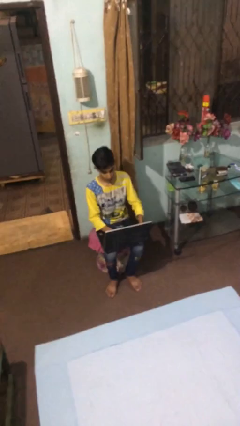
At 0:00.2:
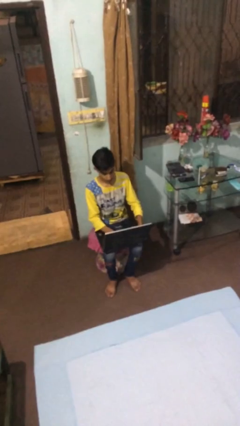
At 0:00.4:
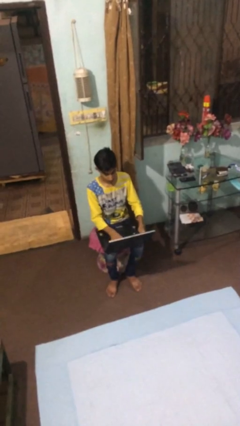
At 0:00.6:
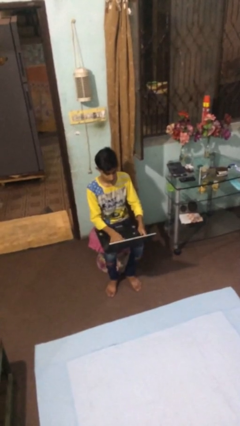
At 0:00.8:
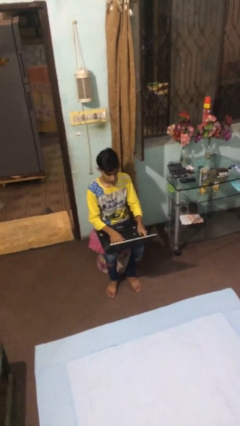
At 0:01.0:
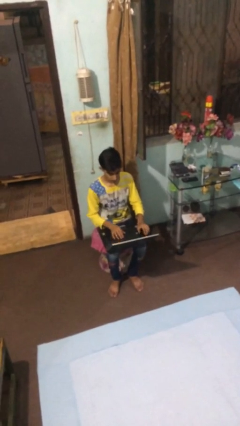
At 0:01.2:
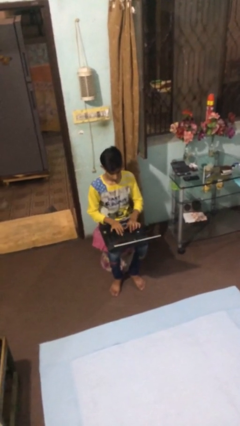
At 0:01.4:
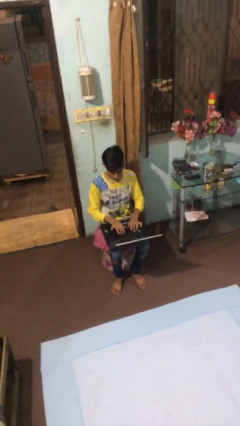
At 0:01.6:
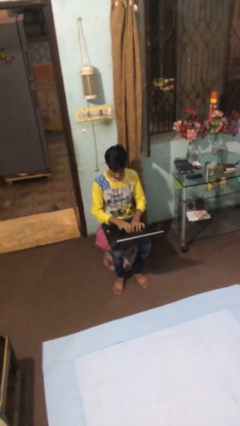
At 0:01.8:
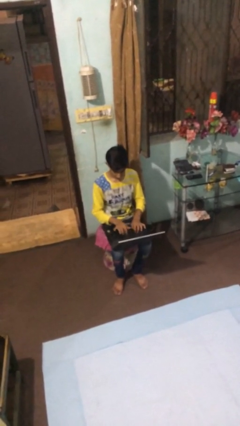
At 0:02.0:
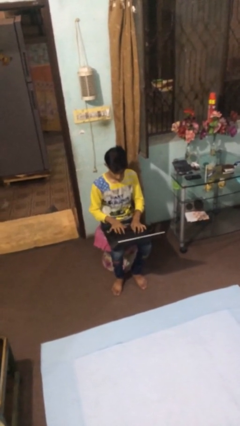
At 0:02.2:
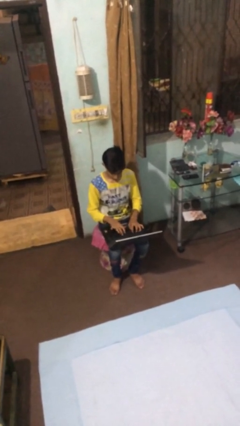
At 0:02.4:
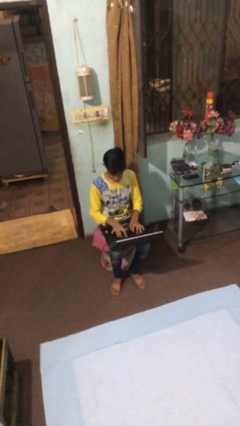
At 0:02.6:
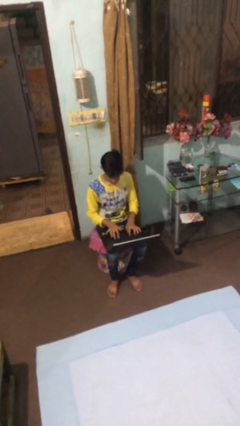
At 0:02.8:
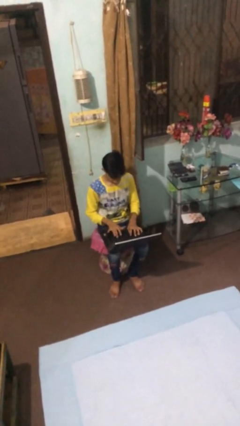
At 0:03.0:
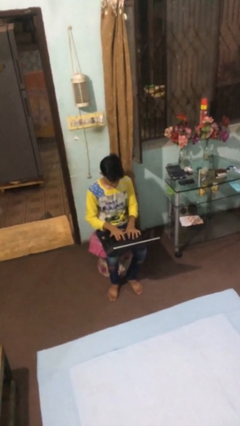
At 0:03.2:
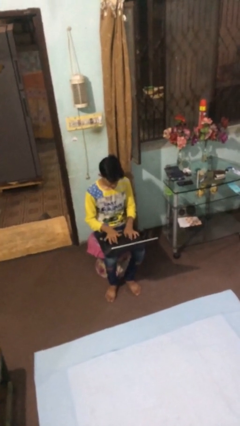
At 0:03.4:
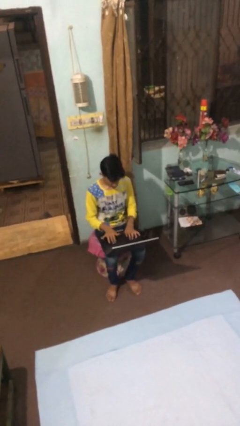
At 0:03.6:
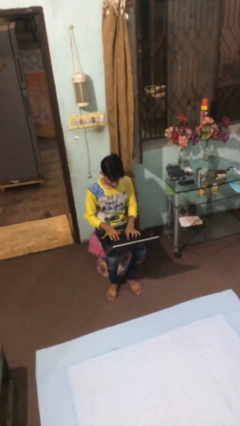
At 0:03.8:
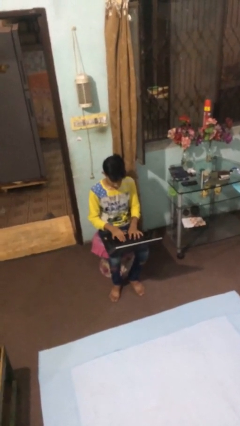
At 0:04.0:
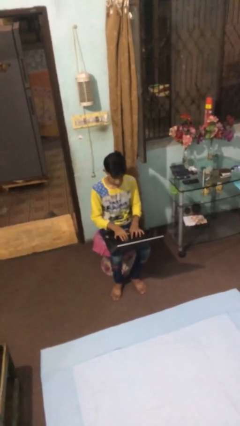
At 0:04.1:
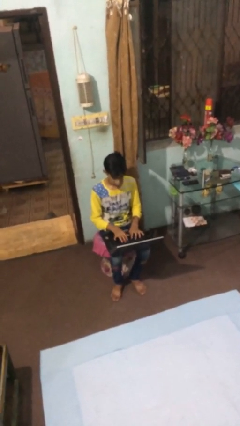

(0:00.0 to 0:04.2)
person interacts with laptop

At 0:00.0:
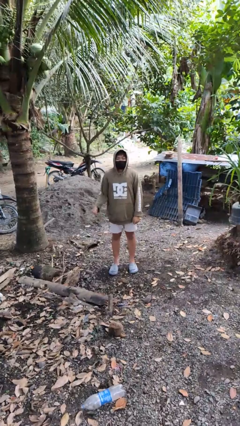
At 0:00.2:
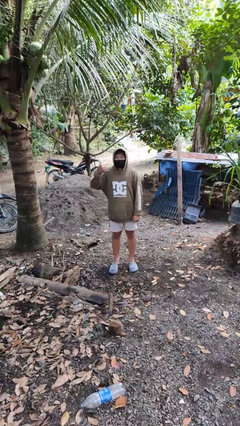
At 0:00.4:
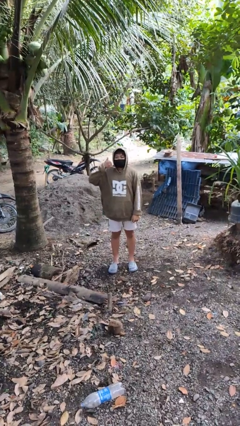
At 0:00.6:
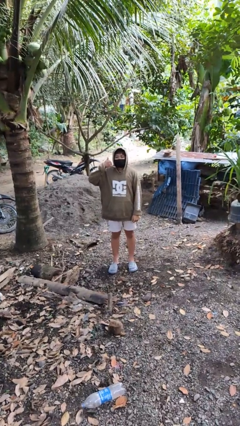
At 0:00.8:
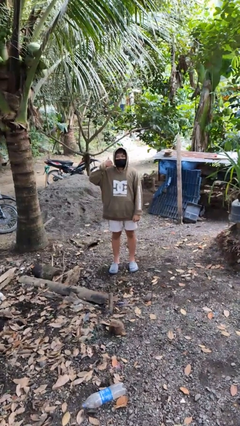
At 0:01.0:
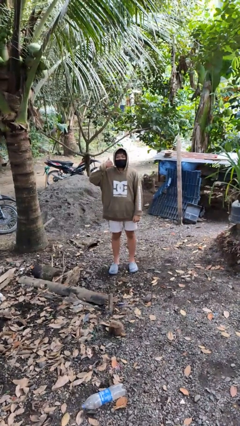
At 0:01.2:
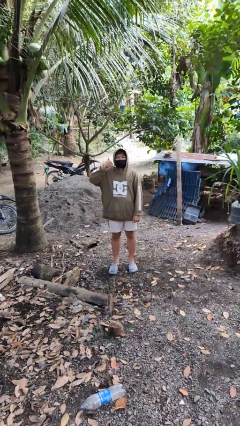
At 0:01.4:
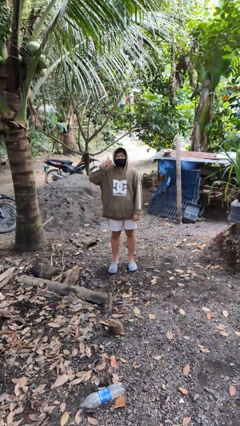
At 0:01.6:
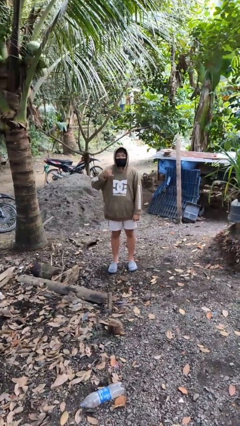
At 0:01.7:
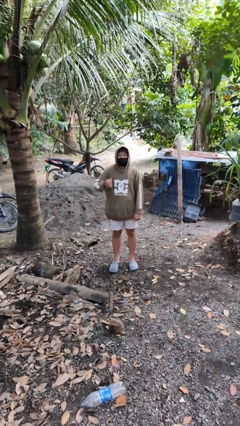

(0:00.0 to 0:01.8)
person gestures call me

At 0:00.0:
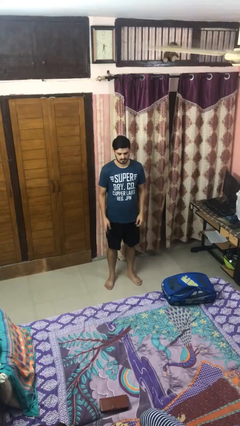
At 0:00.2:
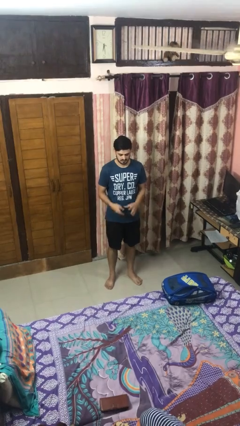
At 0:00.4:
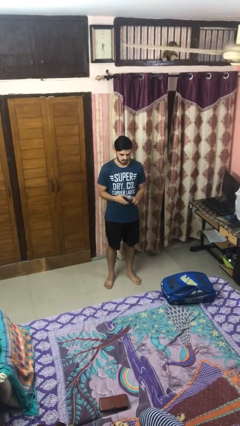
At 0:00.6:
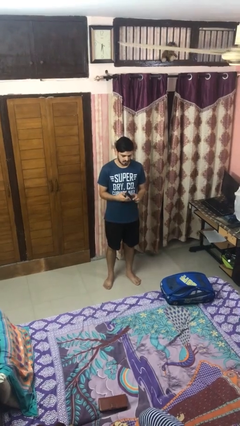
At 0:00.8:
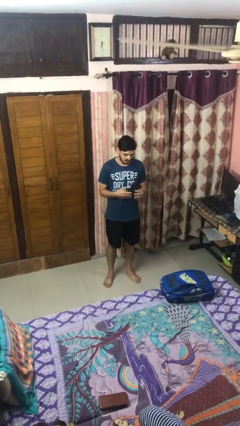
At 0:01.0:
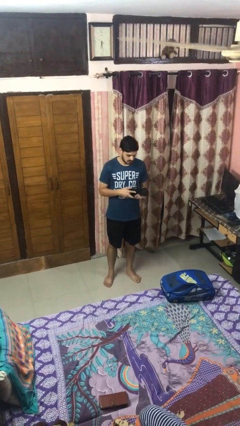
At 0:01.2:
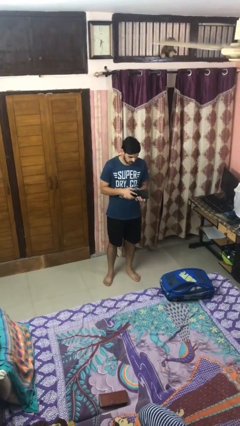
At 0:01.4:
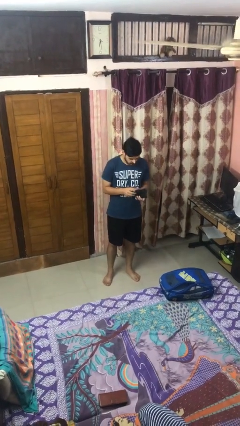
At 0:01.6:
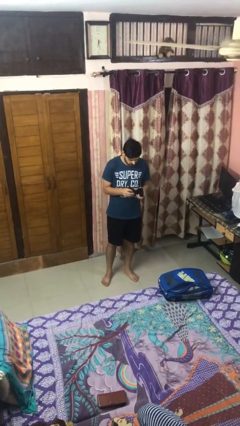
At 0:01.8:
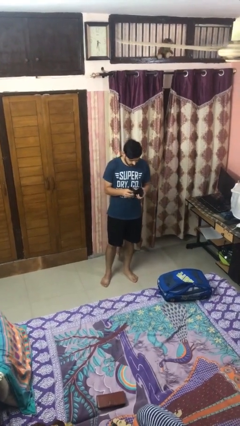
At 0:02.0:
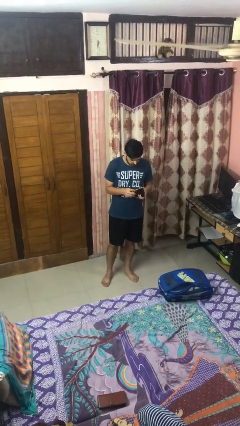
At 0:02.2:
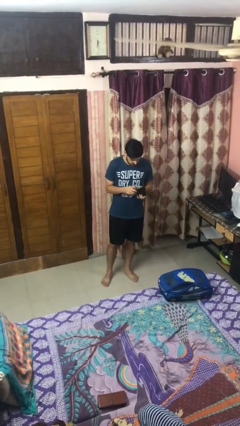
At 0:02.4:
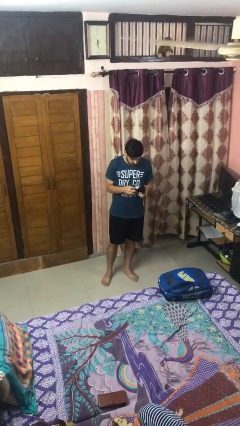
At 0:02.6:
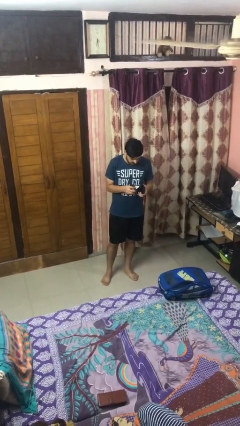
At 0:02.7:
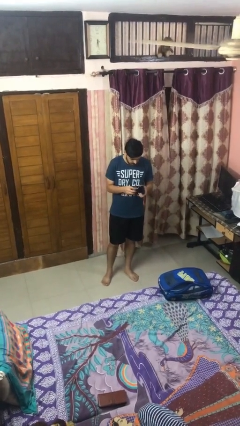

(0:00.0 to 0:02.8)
person searches in purse

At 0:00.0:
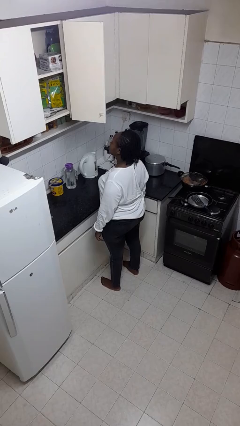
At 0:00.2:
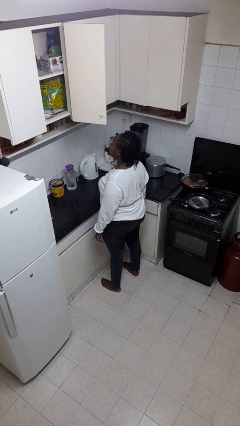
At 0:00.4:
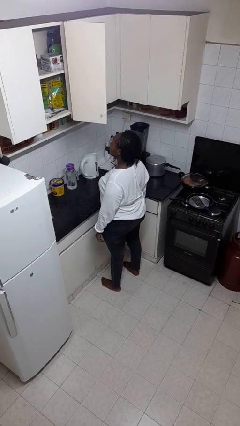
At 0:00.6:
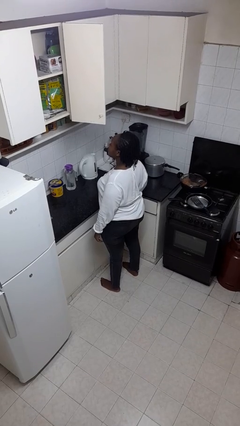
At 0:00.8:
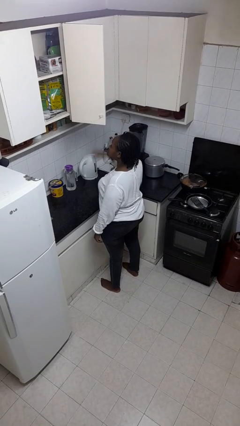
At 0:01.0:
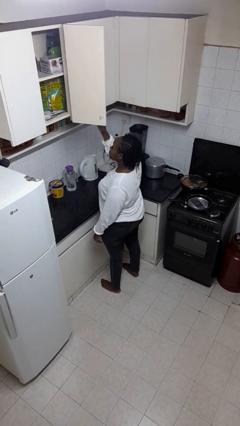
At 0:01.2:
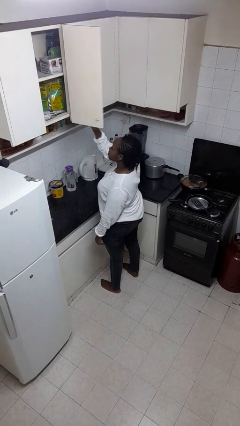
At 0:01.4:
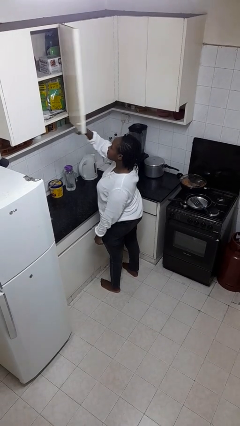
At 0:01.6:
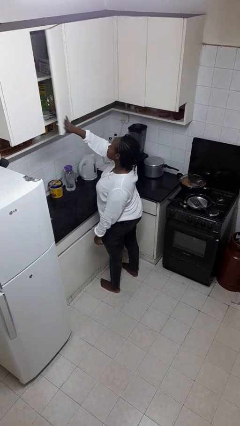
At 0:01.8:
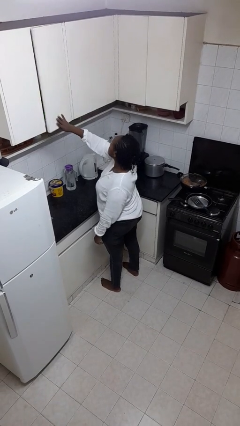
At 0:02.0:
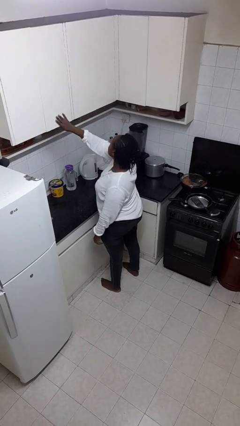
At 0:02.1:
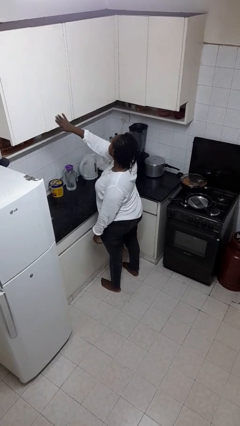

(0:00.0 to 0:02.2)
person closes cabinet

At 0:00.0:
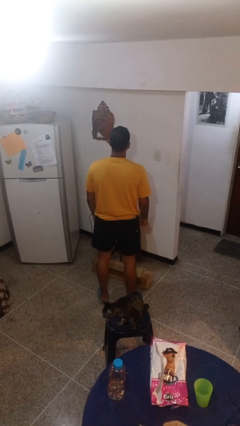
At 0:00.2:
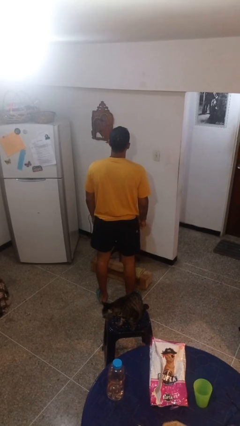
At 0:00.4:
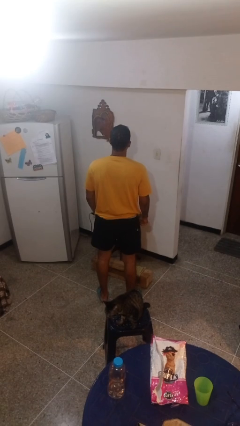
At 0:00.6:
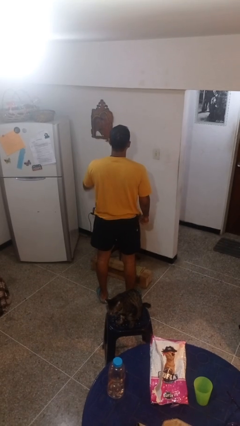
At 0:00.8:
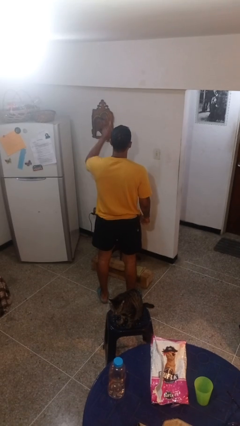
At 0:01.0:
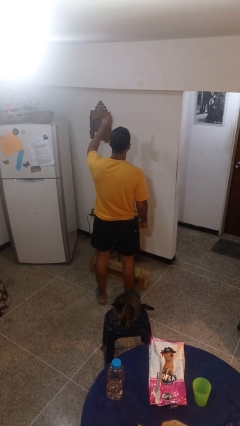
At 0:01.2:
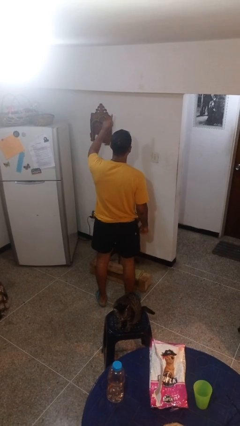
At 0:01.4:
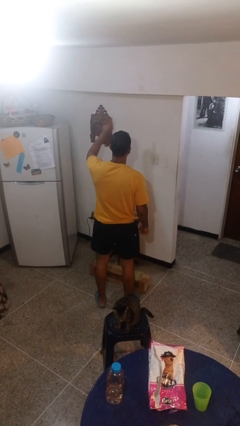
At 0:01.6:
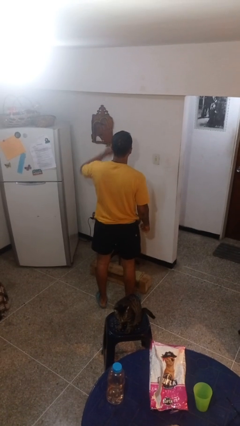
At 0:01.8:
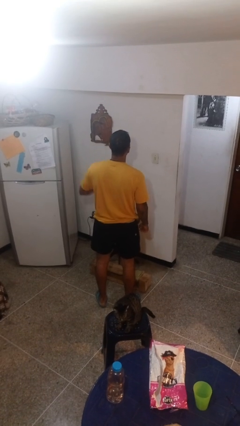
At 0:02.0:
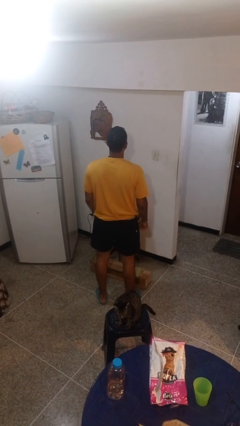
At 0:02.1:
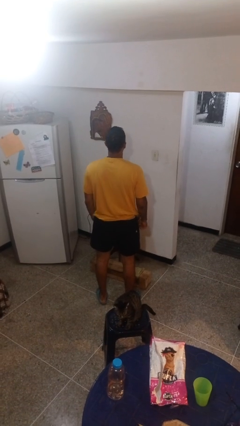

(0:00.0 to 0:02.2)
person gestures number one

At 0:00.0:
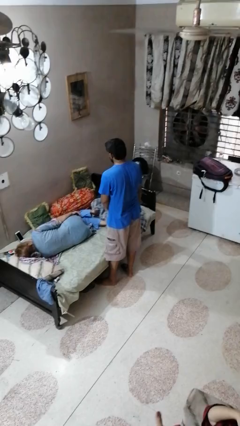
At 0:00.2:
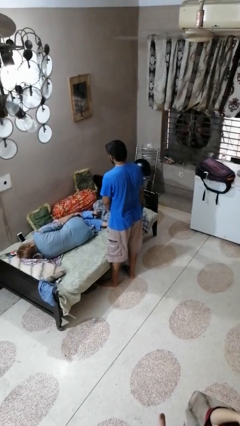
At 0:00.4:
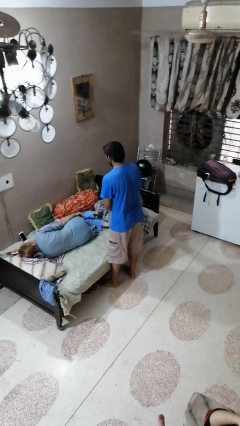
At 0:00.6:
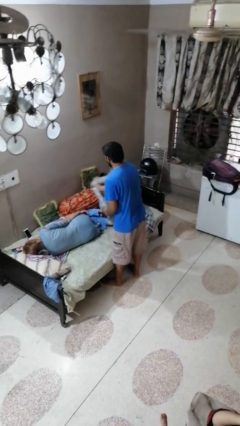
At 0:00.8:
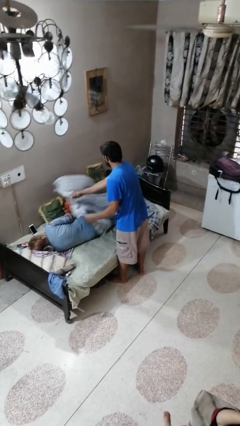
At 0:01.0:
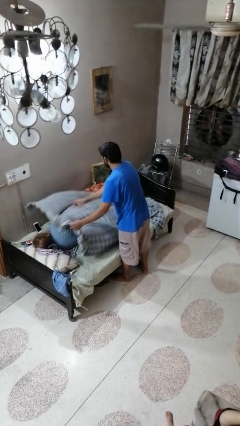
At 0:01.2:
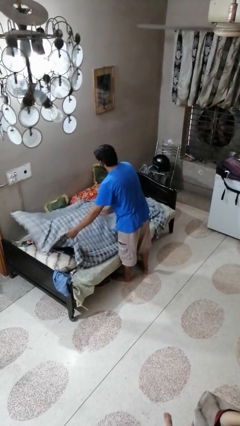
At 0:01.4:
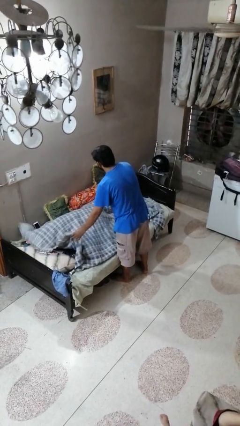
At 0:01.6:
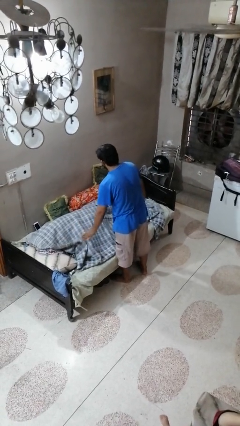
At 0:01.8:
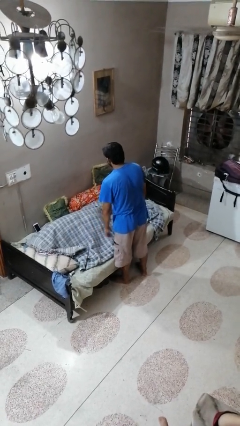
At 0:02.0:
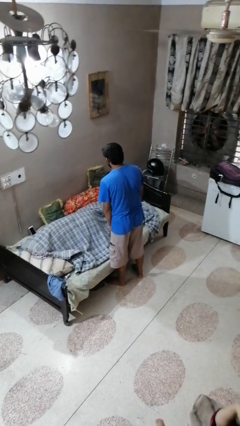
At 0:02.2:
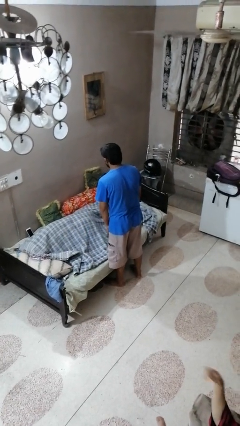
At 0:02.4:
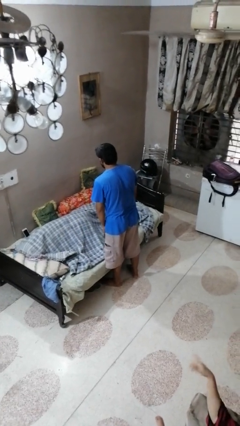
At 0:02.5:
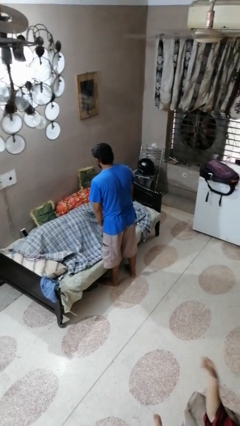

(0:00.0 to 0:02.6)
person covers friend with blanket

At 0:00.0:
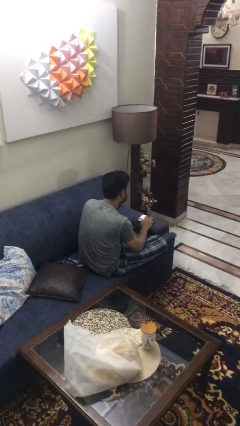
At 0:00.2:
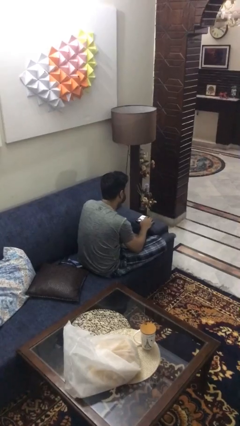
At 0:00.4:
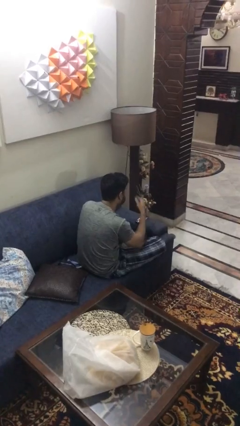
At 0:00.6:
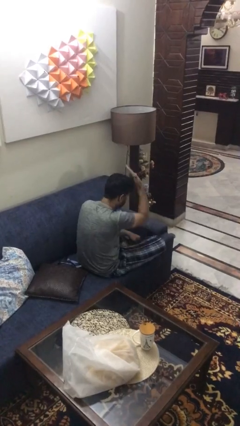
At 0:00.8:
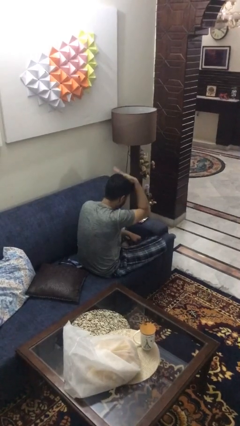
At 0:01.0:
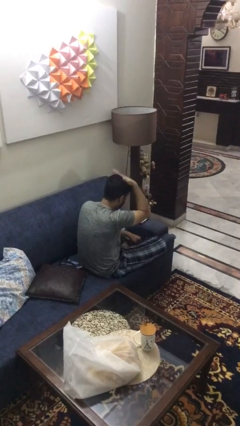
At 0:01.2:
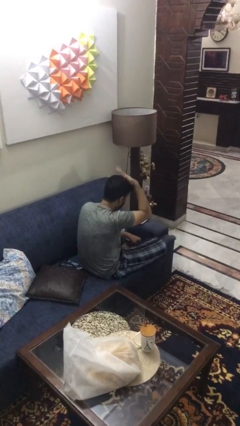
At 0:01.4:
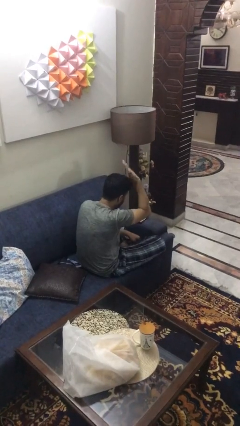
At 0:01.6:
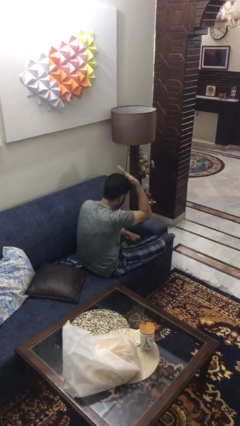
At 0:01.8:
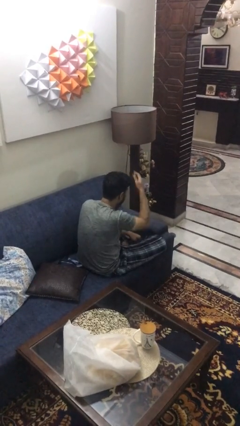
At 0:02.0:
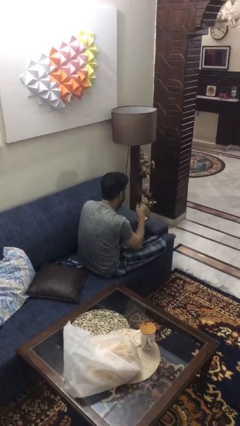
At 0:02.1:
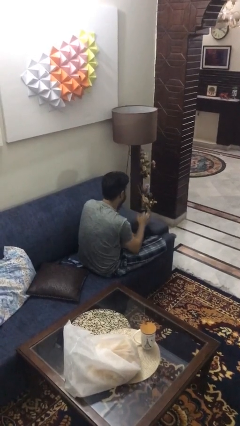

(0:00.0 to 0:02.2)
person pats head
